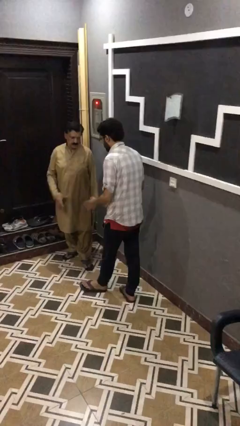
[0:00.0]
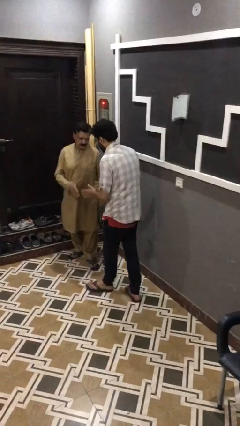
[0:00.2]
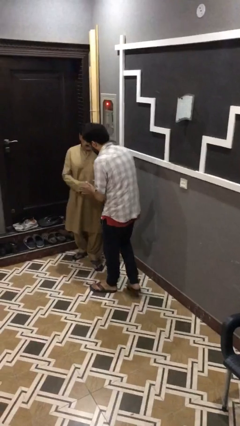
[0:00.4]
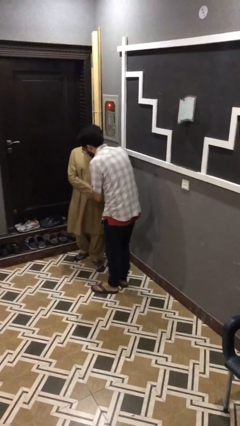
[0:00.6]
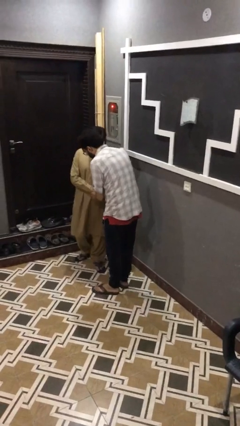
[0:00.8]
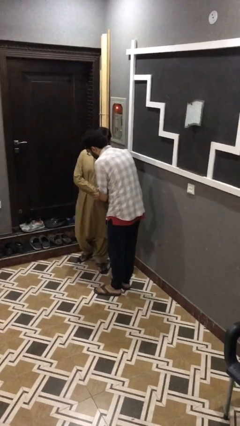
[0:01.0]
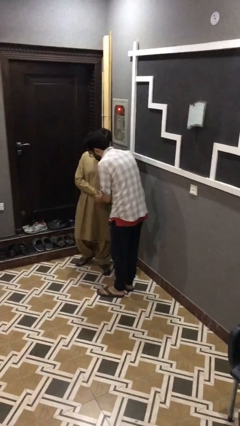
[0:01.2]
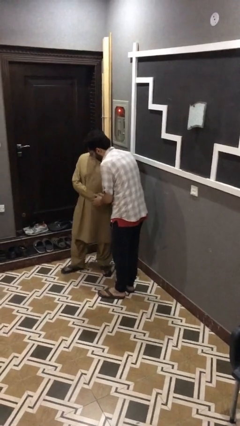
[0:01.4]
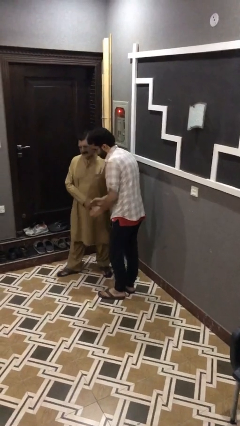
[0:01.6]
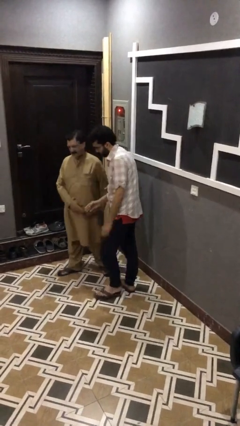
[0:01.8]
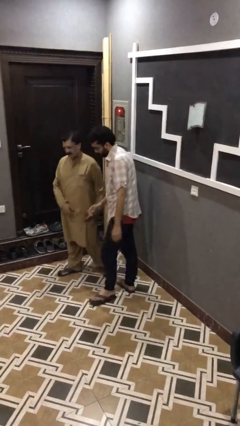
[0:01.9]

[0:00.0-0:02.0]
person shakes hand

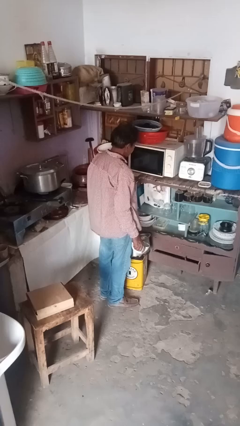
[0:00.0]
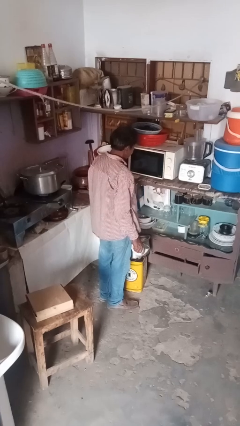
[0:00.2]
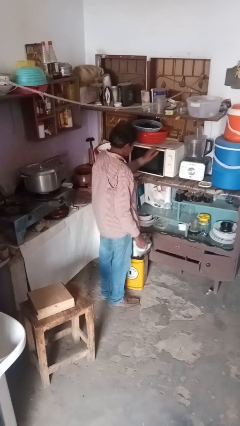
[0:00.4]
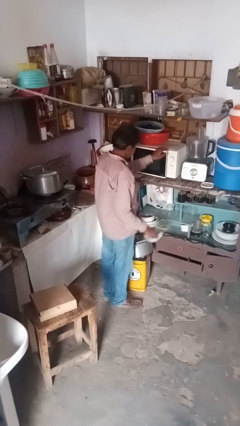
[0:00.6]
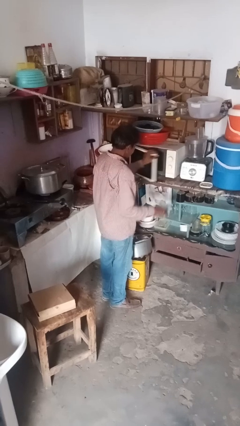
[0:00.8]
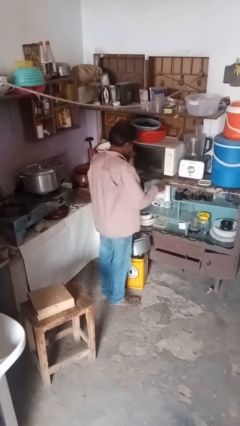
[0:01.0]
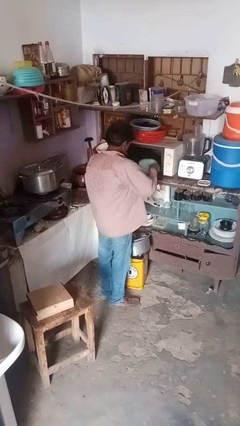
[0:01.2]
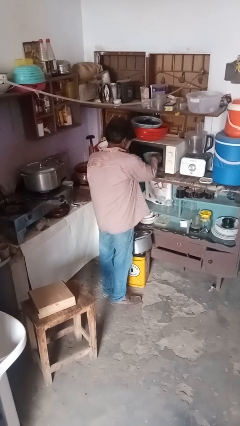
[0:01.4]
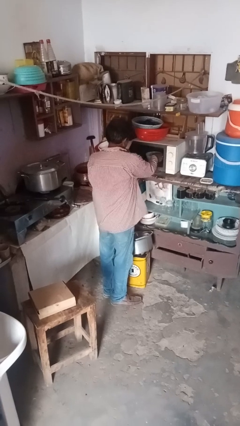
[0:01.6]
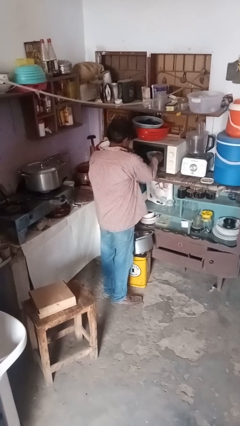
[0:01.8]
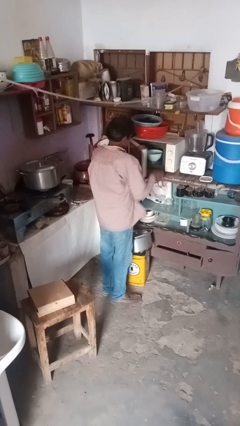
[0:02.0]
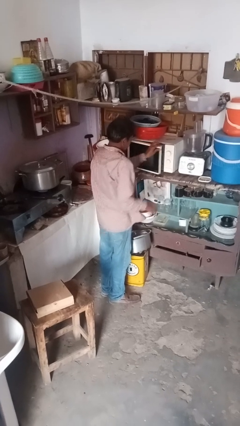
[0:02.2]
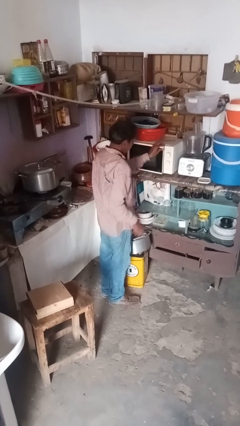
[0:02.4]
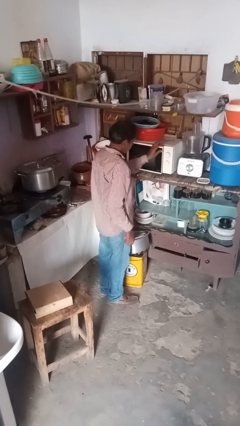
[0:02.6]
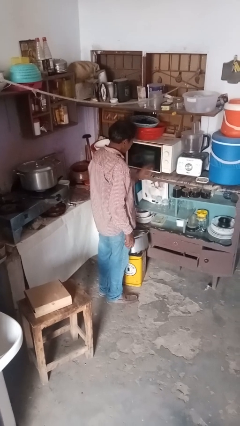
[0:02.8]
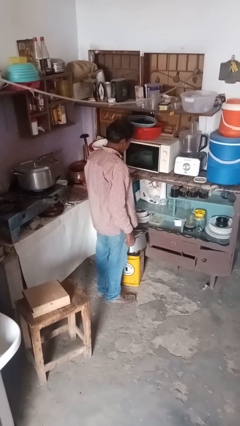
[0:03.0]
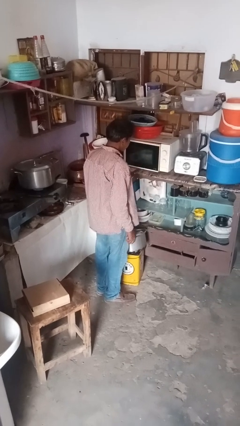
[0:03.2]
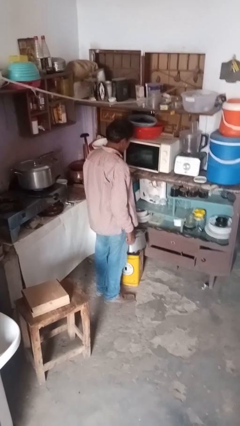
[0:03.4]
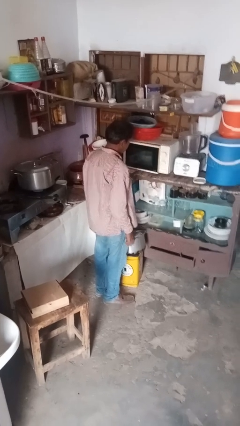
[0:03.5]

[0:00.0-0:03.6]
person puts object into microwave

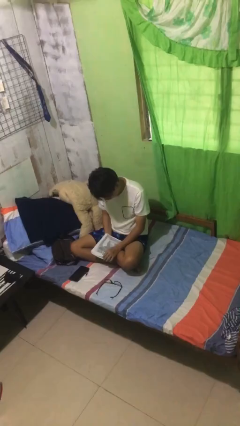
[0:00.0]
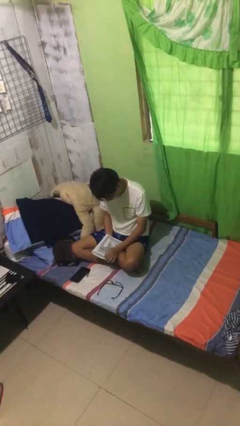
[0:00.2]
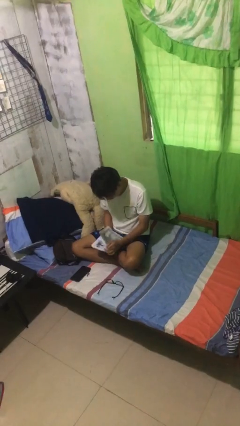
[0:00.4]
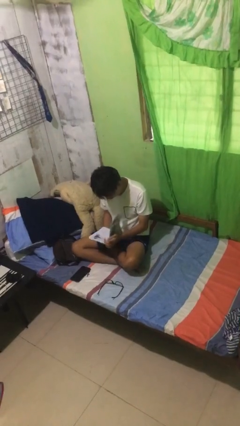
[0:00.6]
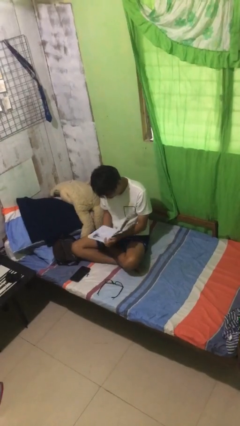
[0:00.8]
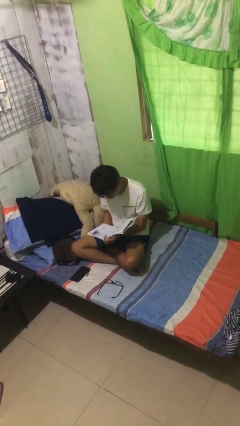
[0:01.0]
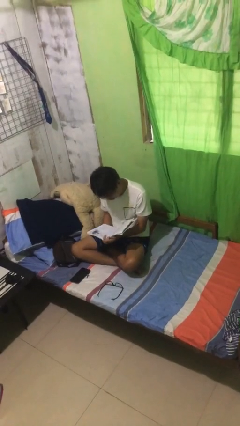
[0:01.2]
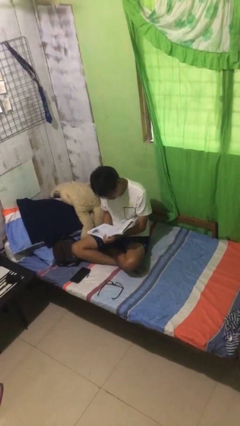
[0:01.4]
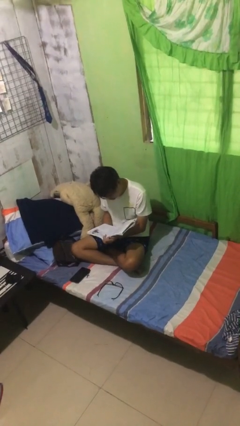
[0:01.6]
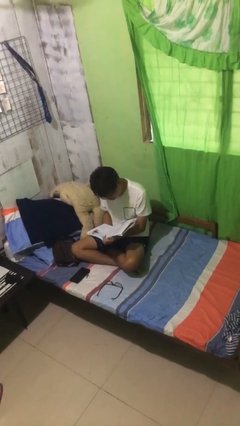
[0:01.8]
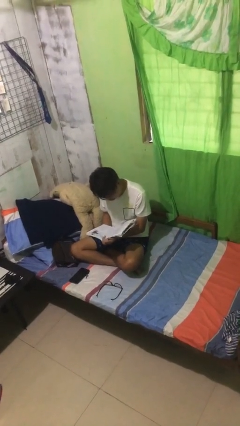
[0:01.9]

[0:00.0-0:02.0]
person reads document

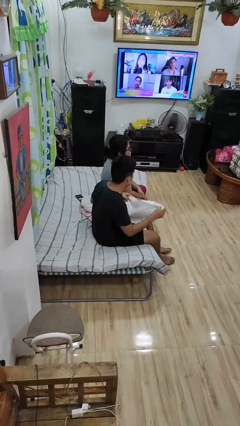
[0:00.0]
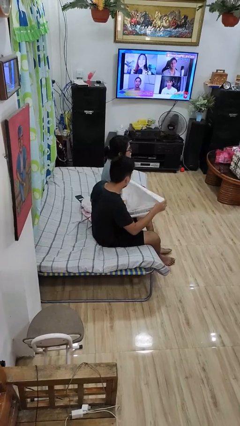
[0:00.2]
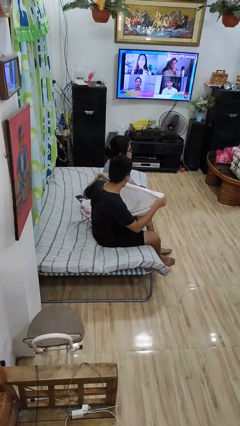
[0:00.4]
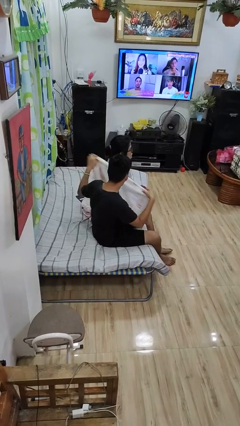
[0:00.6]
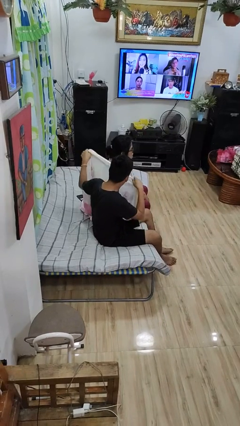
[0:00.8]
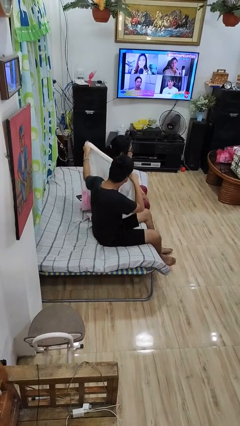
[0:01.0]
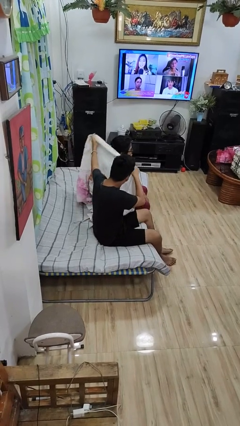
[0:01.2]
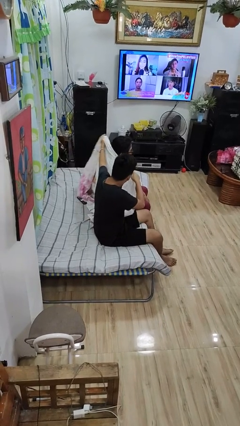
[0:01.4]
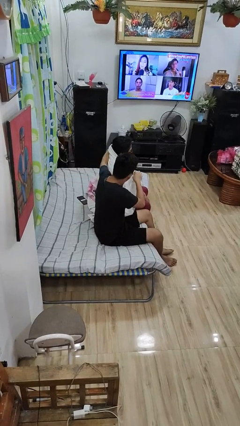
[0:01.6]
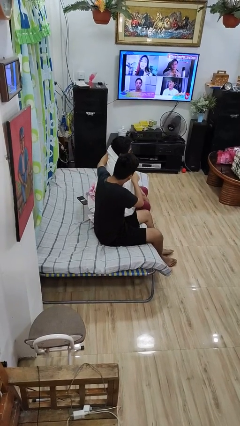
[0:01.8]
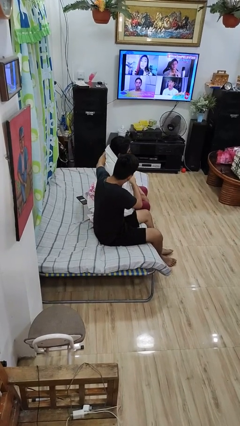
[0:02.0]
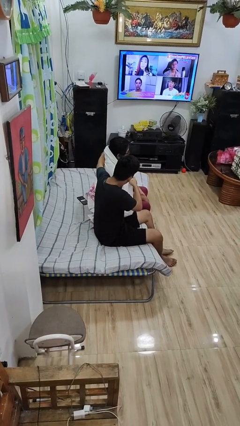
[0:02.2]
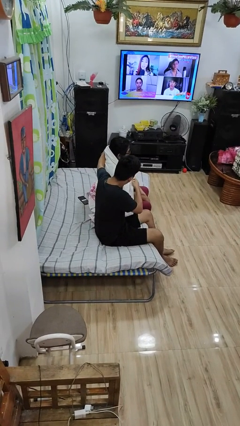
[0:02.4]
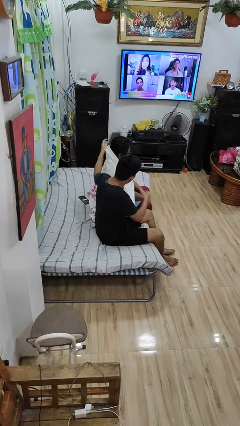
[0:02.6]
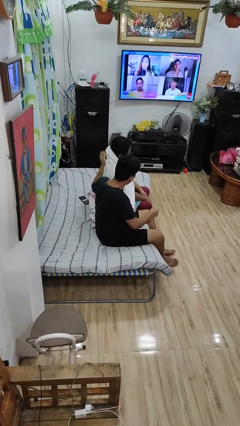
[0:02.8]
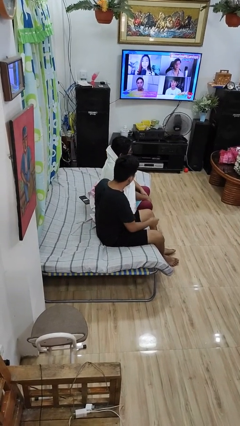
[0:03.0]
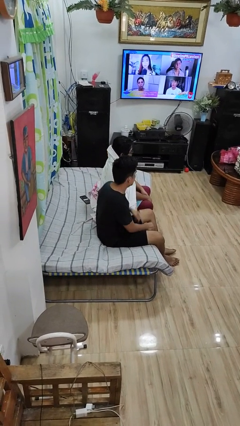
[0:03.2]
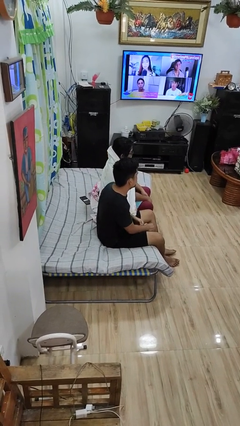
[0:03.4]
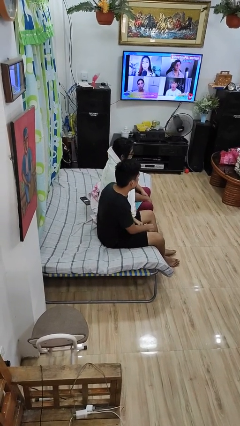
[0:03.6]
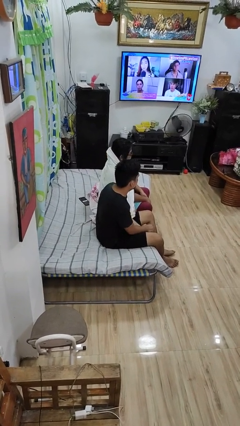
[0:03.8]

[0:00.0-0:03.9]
person covers friend with blanket

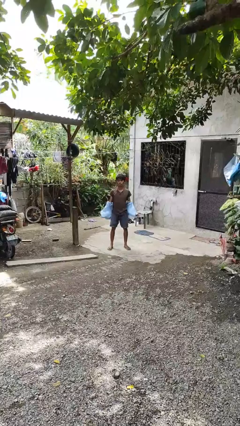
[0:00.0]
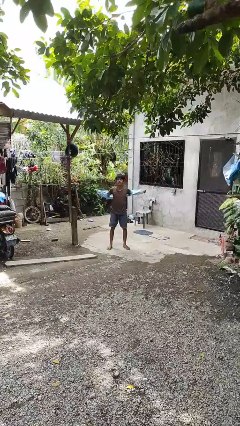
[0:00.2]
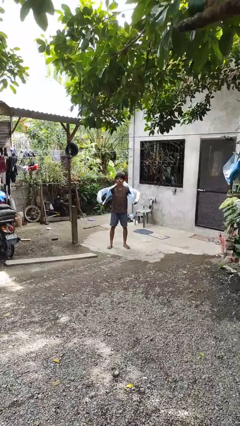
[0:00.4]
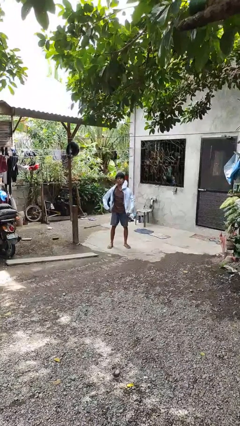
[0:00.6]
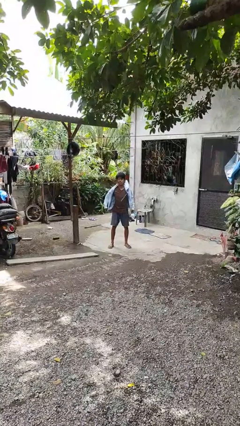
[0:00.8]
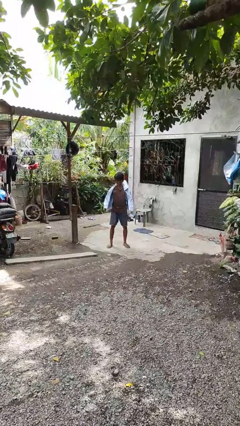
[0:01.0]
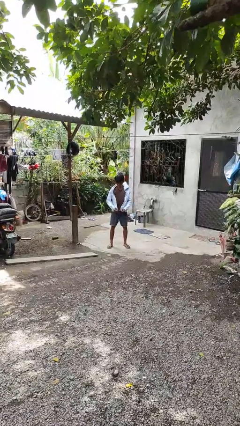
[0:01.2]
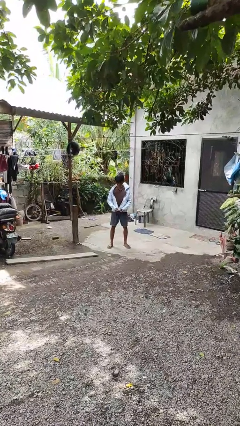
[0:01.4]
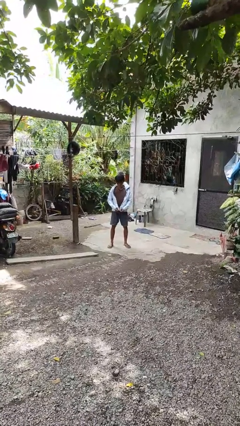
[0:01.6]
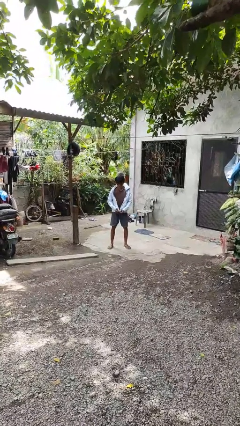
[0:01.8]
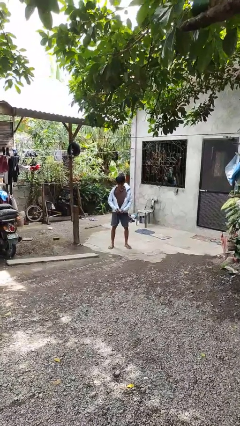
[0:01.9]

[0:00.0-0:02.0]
person puts on jacket

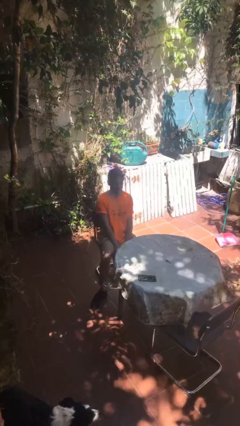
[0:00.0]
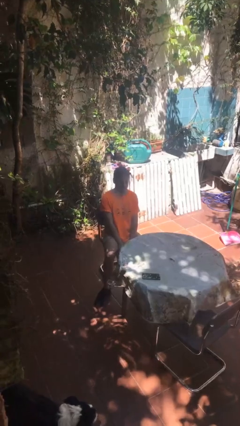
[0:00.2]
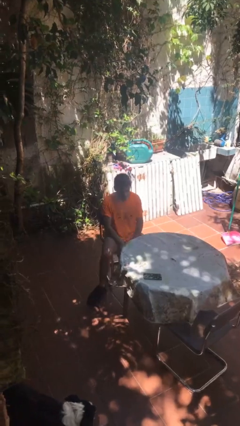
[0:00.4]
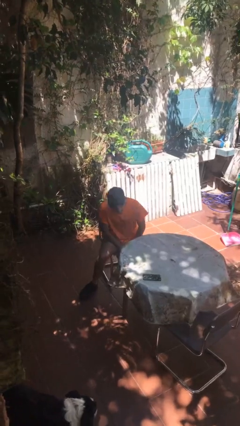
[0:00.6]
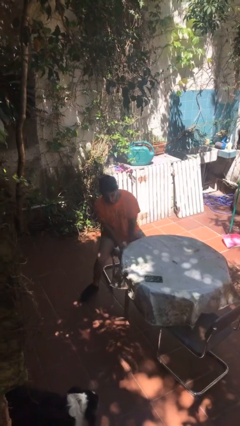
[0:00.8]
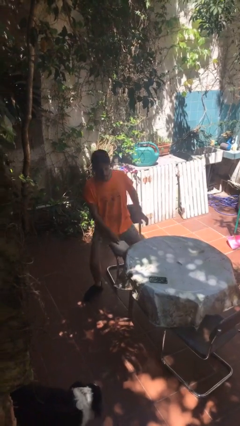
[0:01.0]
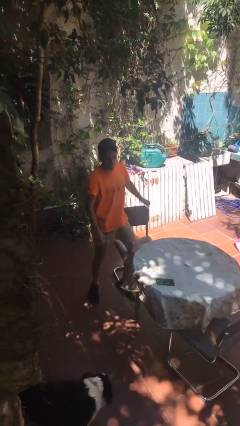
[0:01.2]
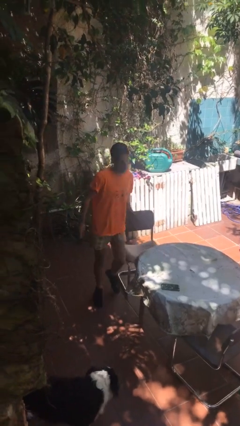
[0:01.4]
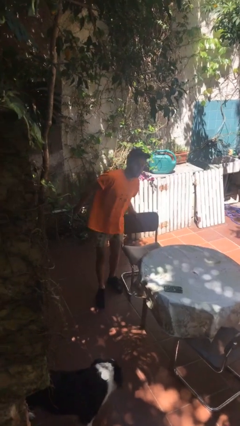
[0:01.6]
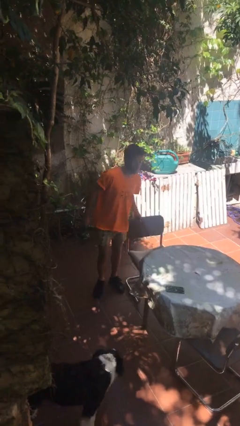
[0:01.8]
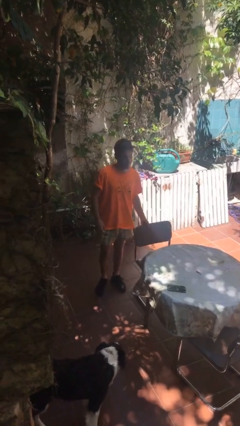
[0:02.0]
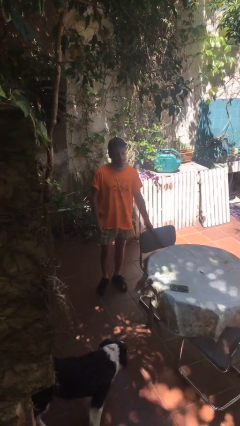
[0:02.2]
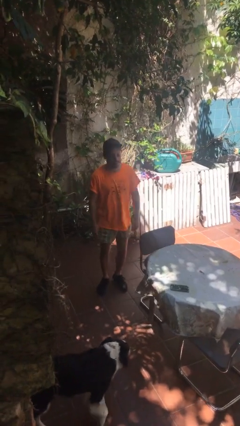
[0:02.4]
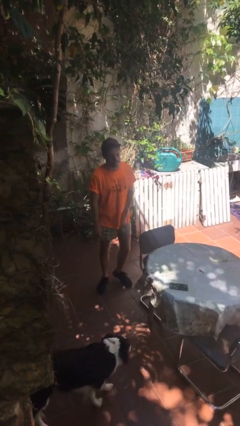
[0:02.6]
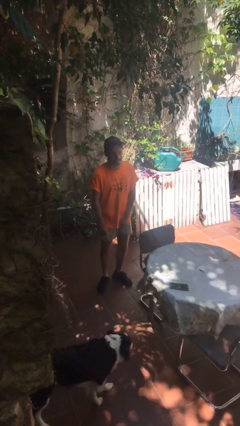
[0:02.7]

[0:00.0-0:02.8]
person stands up

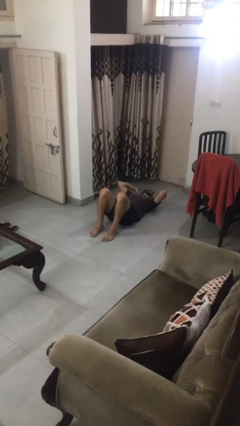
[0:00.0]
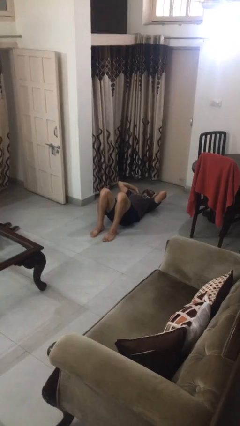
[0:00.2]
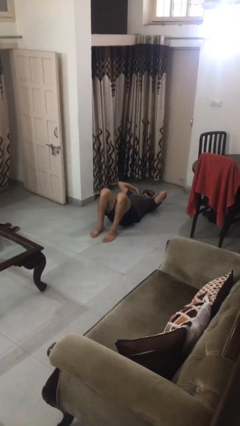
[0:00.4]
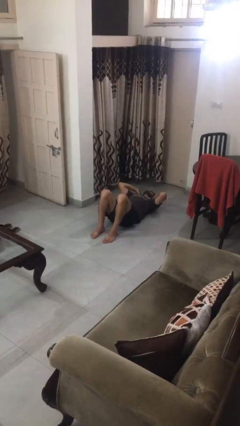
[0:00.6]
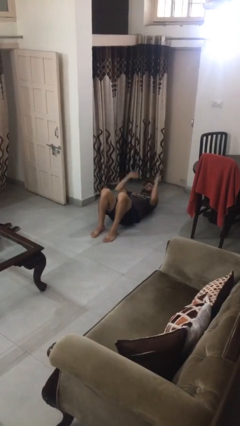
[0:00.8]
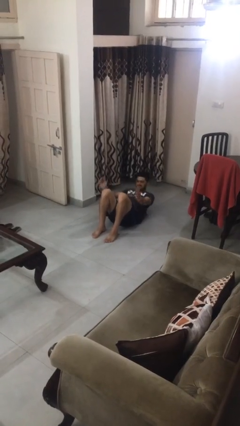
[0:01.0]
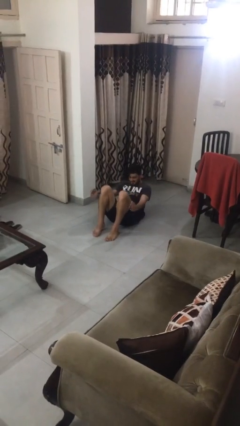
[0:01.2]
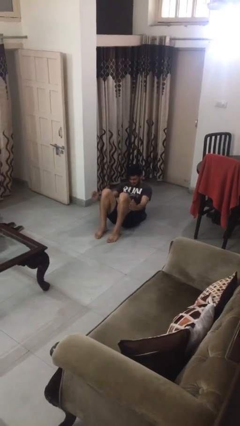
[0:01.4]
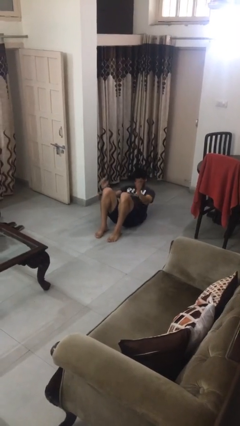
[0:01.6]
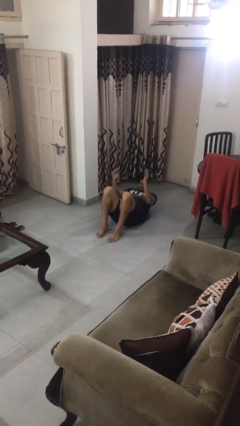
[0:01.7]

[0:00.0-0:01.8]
person exercises with situp
